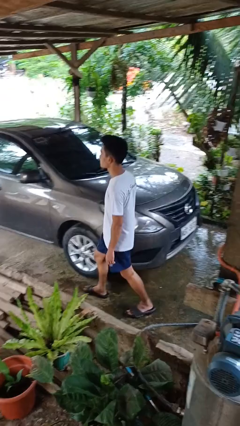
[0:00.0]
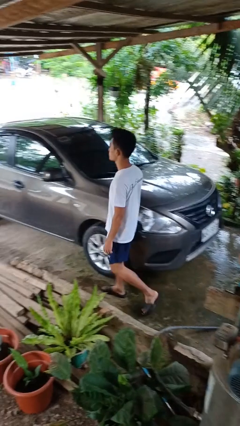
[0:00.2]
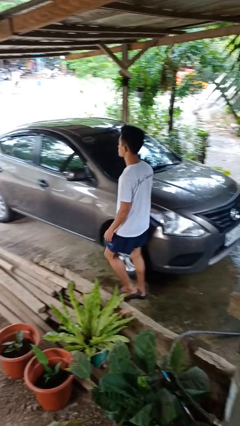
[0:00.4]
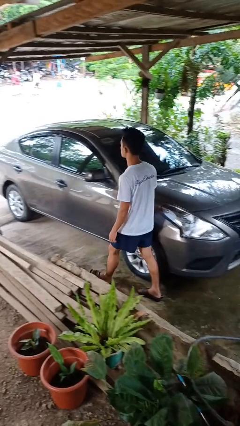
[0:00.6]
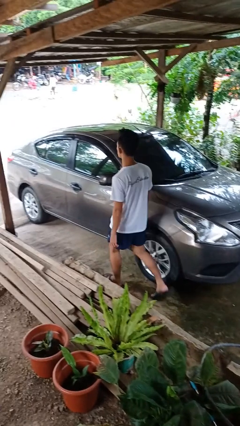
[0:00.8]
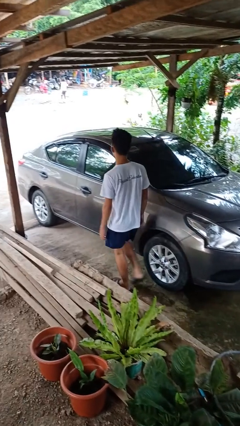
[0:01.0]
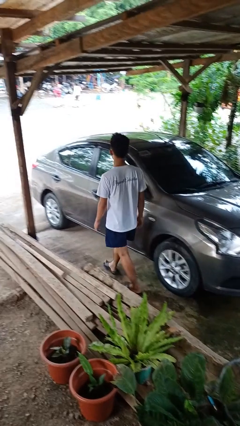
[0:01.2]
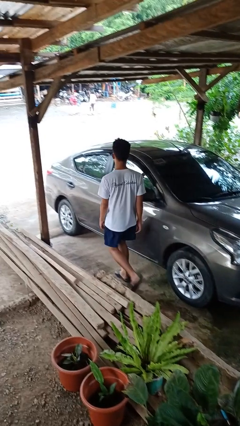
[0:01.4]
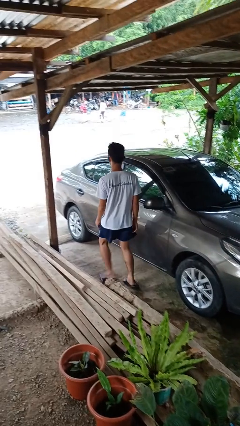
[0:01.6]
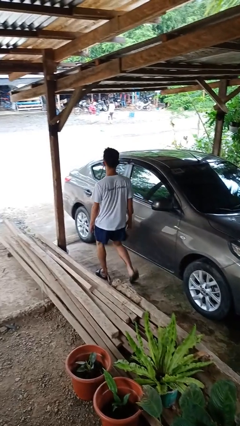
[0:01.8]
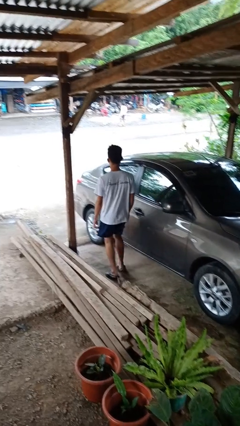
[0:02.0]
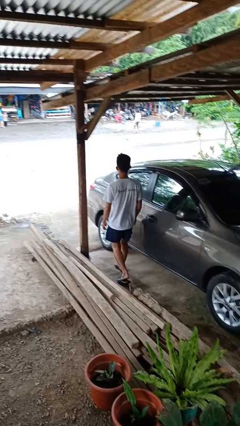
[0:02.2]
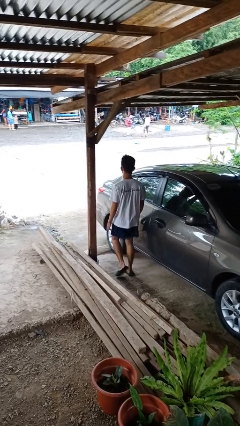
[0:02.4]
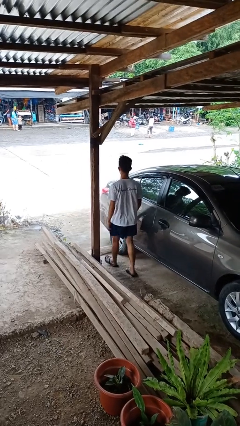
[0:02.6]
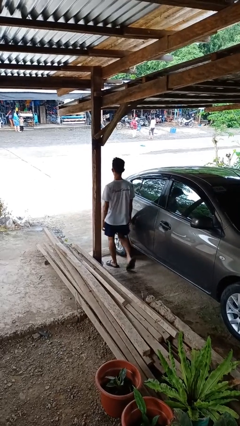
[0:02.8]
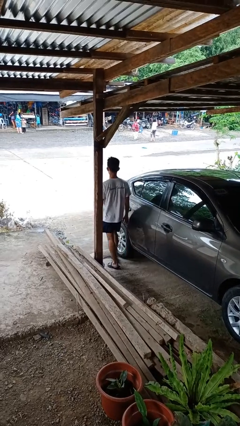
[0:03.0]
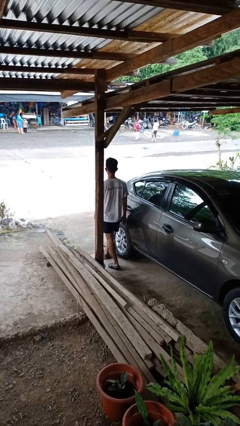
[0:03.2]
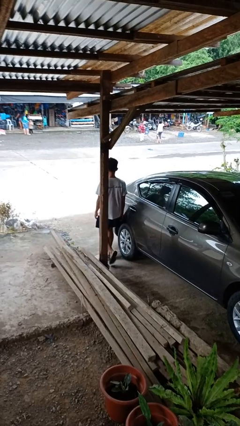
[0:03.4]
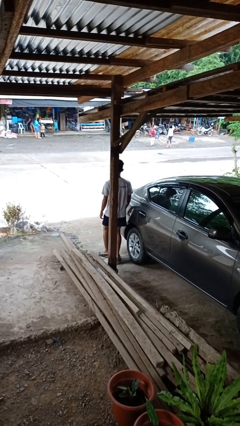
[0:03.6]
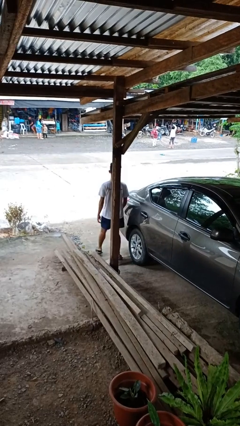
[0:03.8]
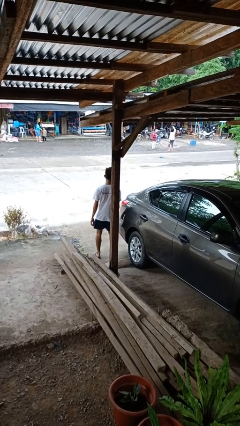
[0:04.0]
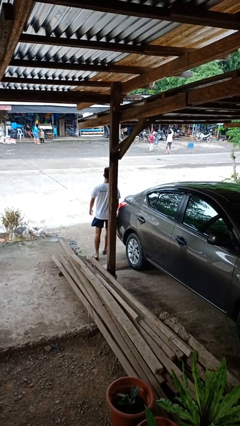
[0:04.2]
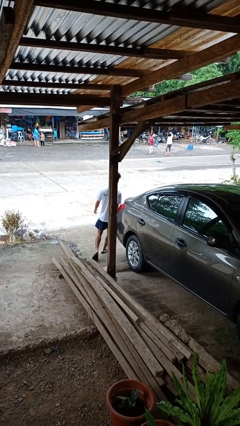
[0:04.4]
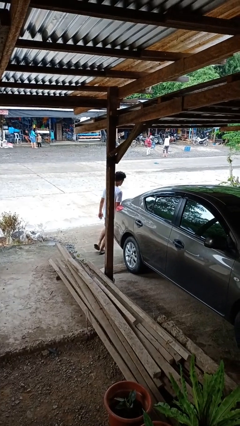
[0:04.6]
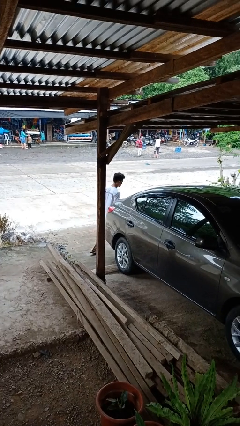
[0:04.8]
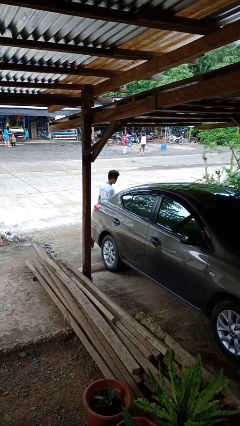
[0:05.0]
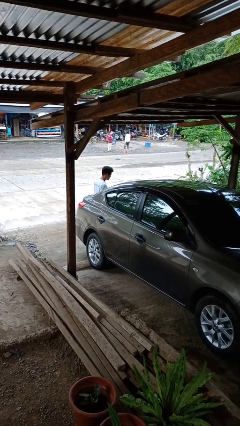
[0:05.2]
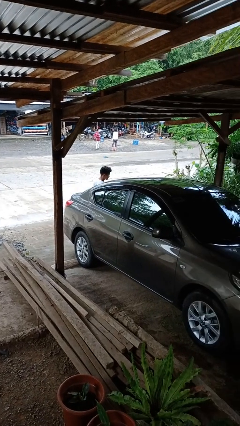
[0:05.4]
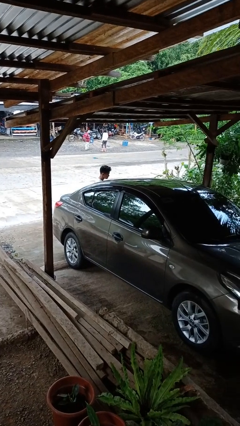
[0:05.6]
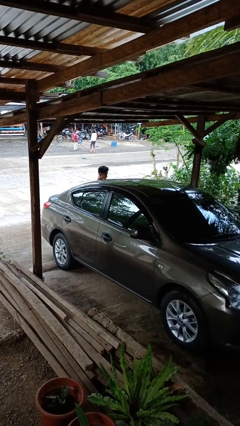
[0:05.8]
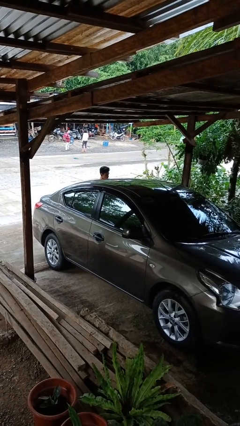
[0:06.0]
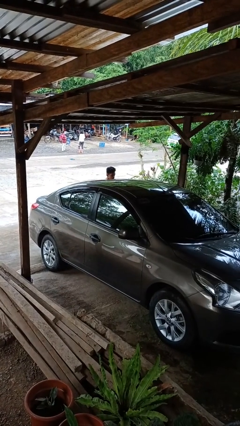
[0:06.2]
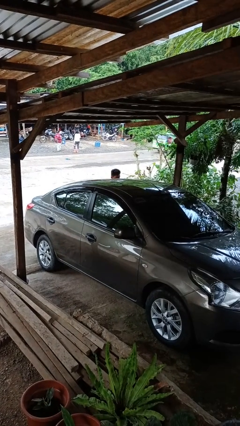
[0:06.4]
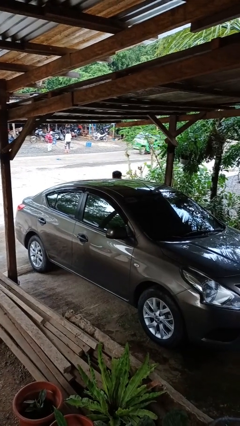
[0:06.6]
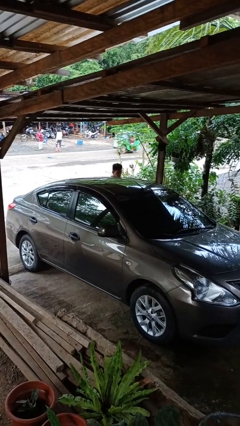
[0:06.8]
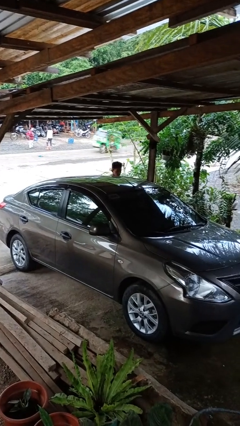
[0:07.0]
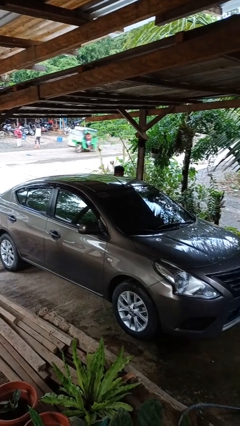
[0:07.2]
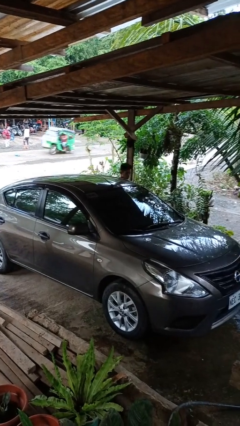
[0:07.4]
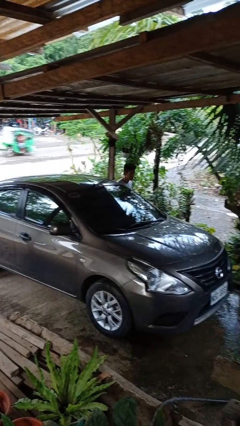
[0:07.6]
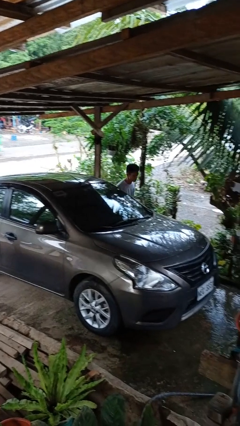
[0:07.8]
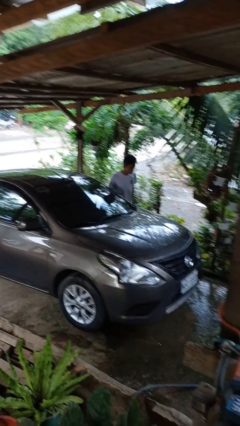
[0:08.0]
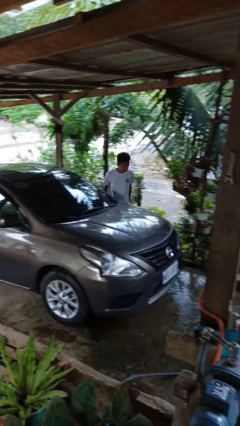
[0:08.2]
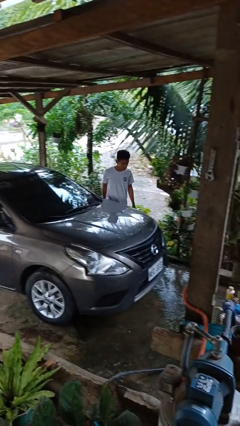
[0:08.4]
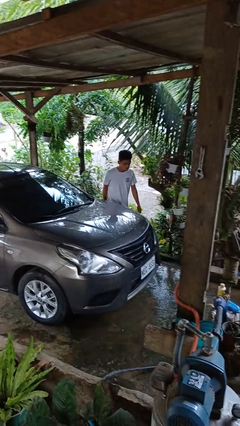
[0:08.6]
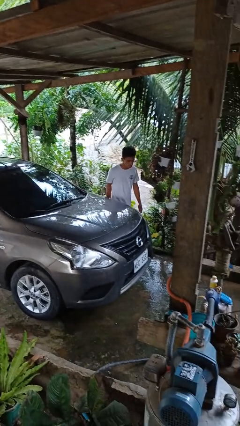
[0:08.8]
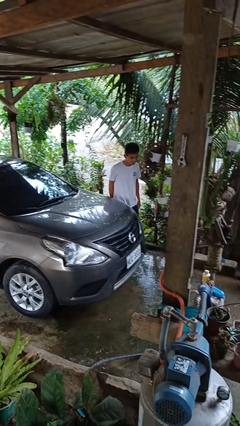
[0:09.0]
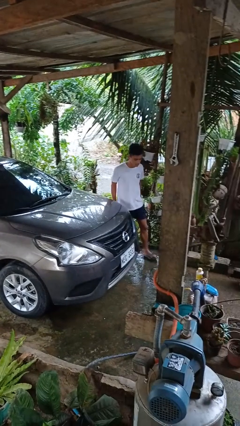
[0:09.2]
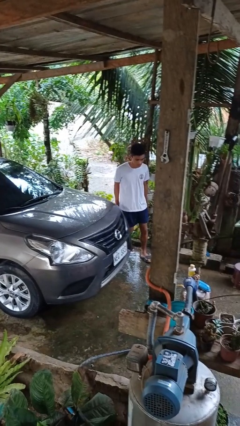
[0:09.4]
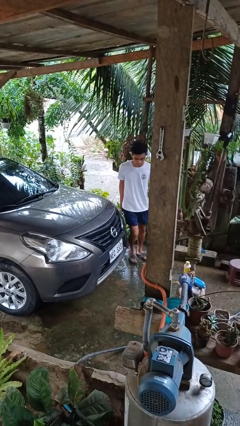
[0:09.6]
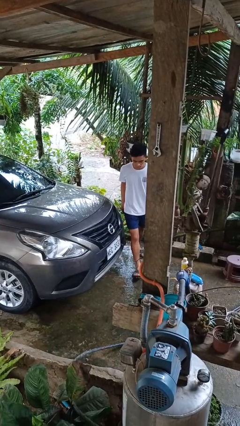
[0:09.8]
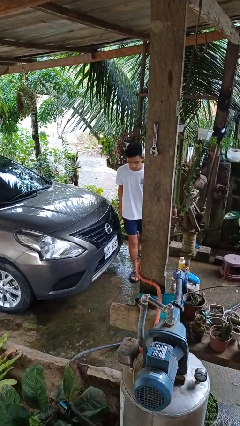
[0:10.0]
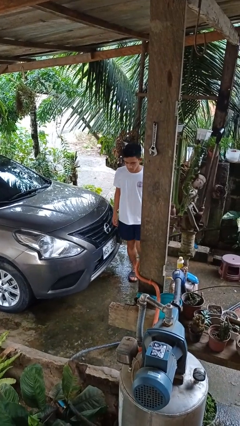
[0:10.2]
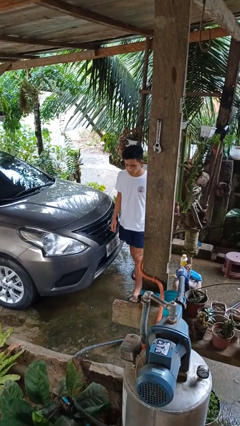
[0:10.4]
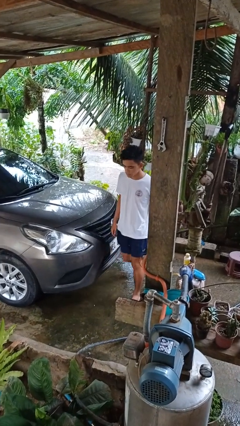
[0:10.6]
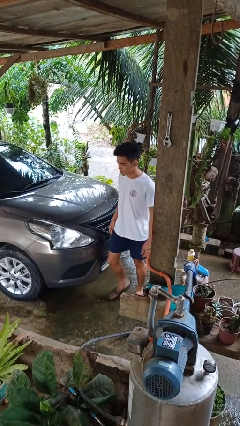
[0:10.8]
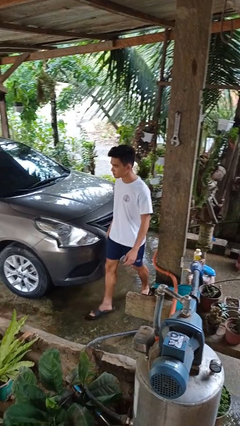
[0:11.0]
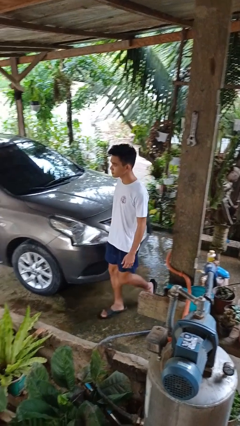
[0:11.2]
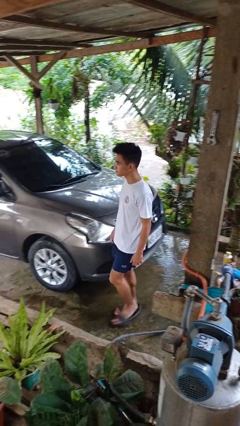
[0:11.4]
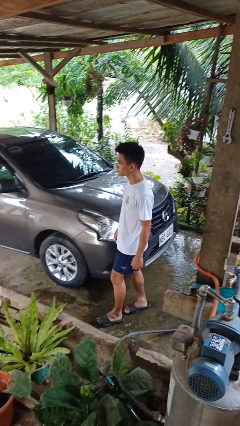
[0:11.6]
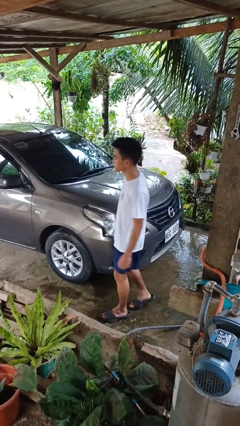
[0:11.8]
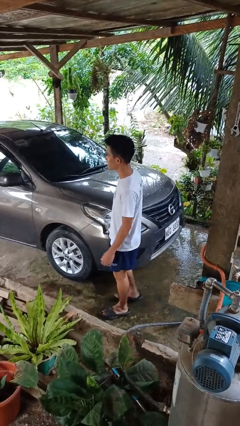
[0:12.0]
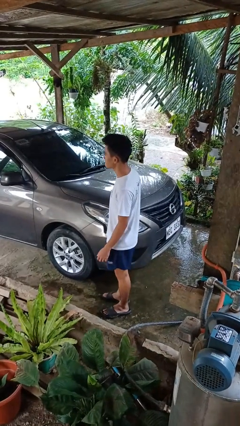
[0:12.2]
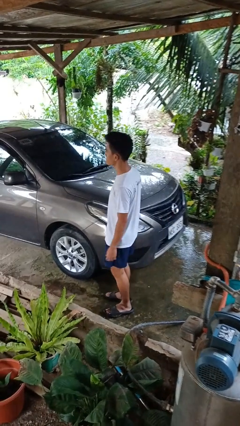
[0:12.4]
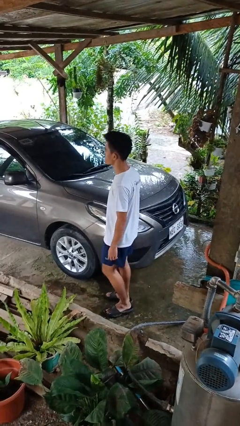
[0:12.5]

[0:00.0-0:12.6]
person walks around car

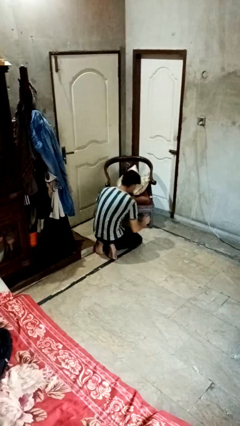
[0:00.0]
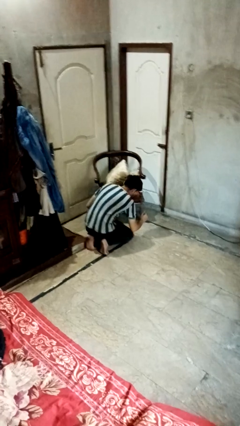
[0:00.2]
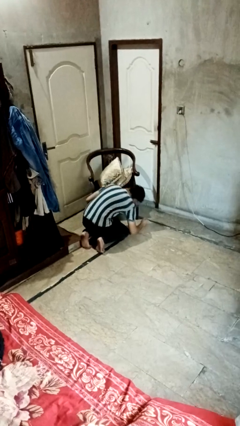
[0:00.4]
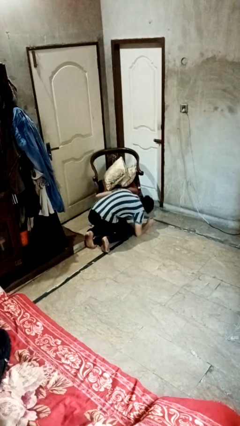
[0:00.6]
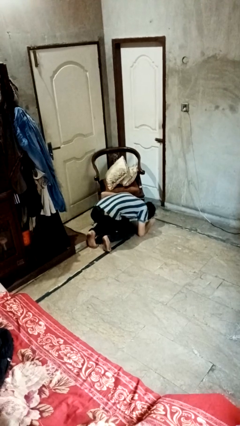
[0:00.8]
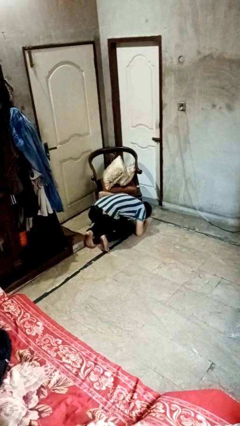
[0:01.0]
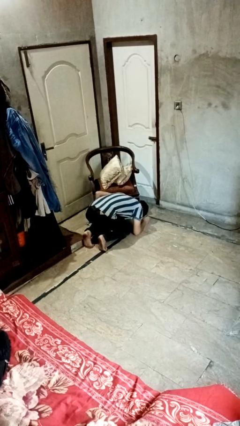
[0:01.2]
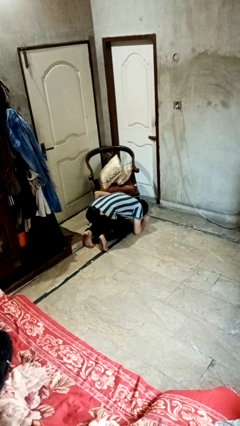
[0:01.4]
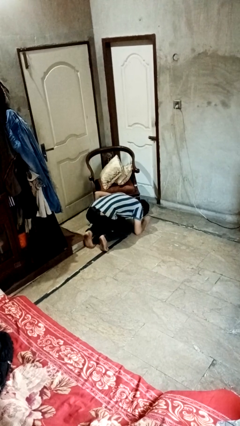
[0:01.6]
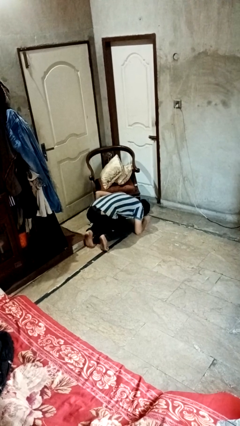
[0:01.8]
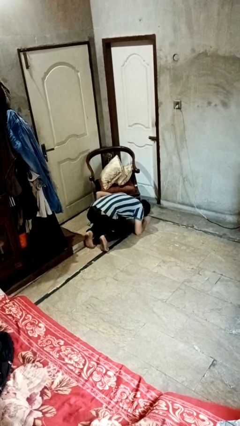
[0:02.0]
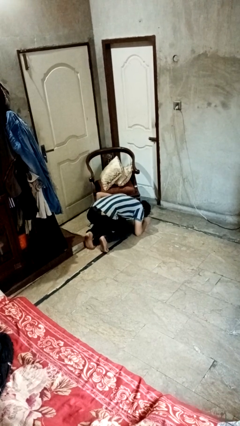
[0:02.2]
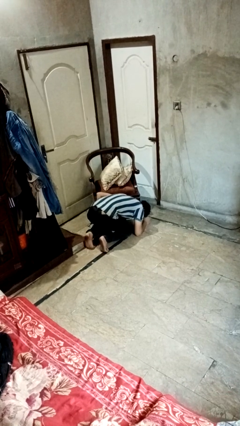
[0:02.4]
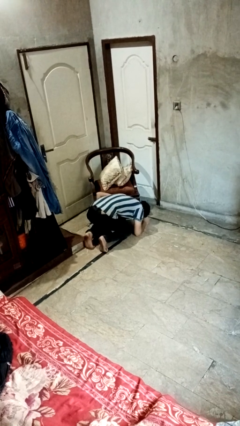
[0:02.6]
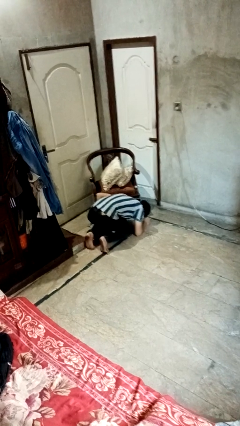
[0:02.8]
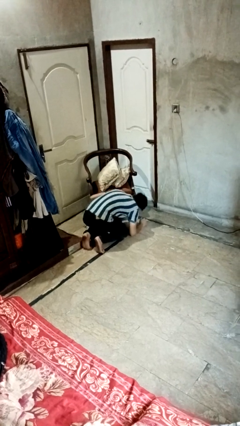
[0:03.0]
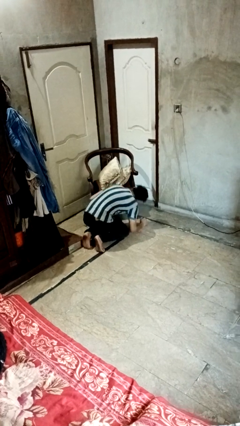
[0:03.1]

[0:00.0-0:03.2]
person searches under couch

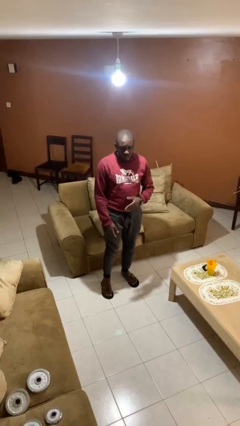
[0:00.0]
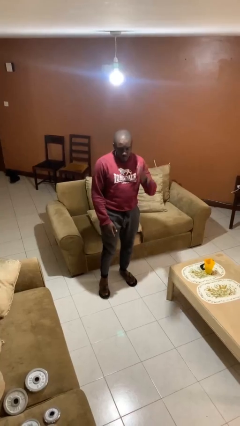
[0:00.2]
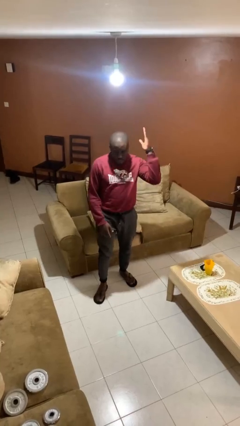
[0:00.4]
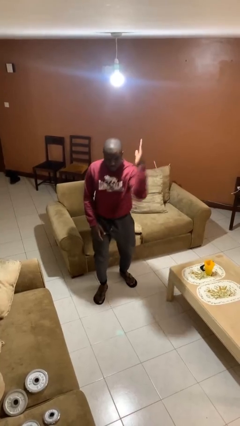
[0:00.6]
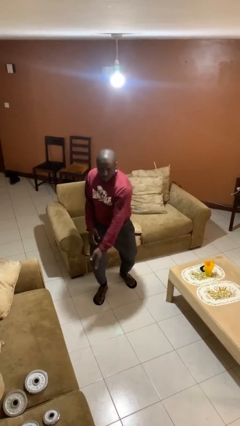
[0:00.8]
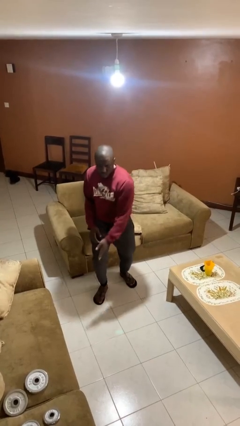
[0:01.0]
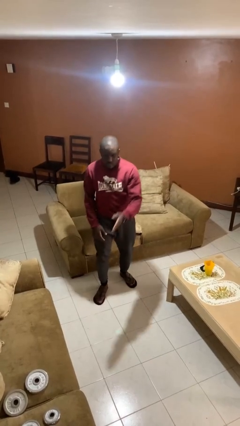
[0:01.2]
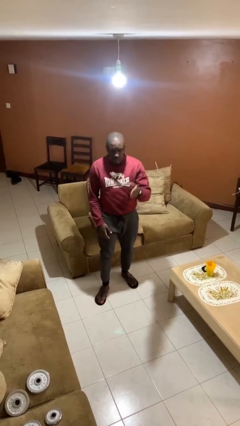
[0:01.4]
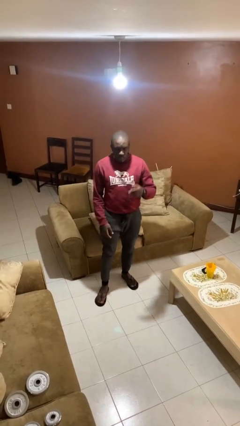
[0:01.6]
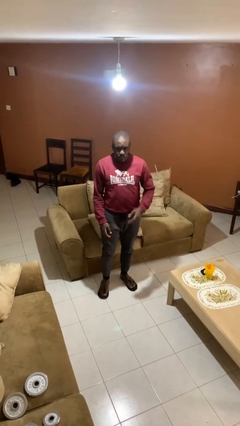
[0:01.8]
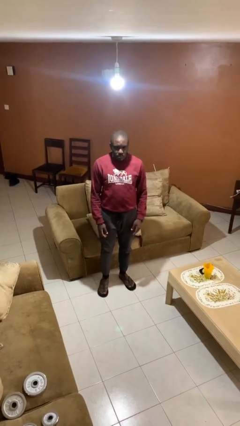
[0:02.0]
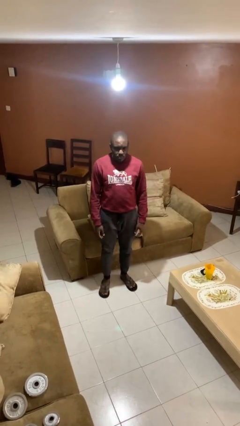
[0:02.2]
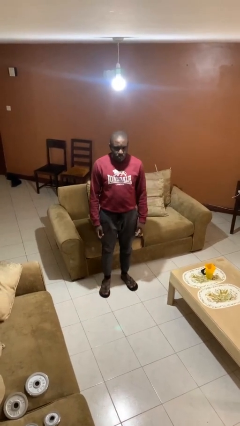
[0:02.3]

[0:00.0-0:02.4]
person karate chop
